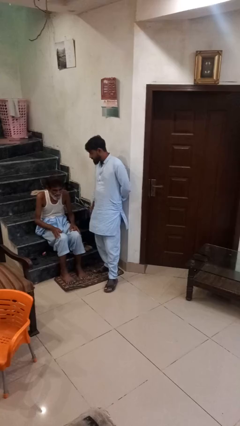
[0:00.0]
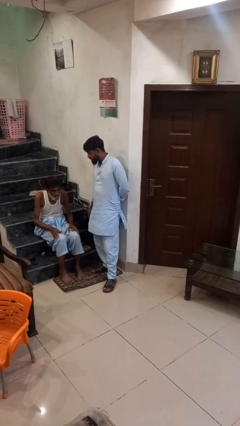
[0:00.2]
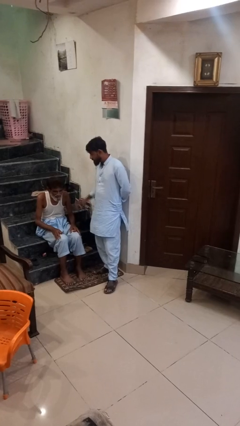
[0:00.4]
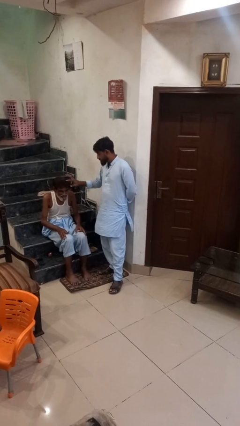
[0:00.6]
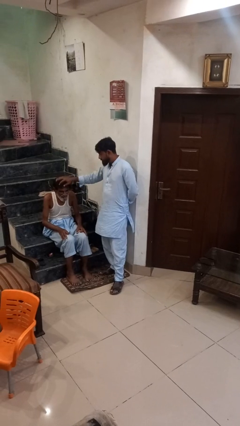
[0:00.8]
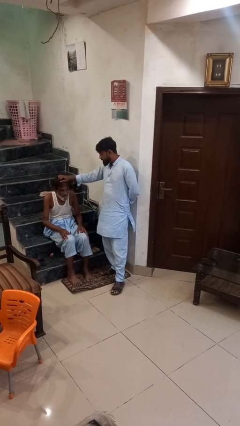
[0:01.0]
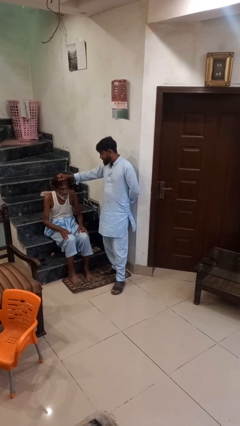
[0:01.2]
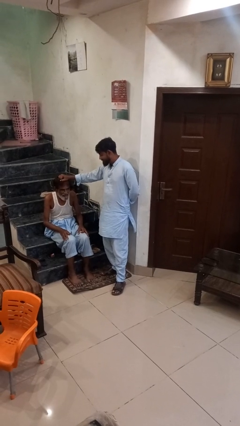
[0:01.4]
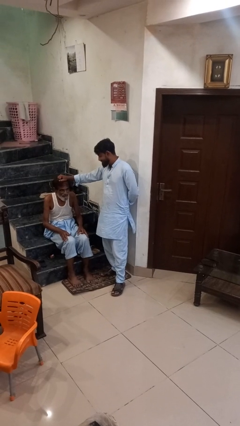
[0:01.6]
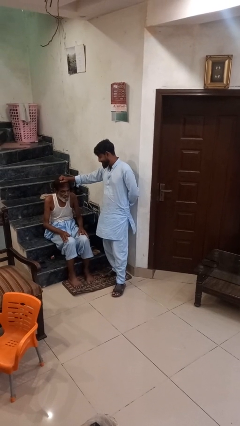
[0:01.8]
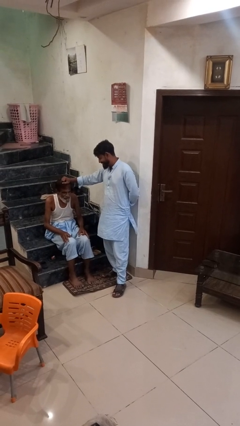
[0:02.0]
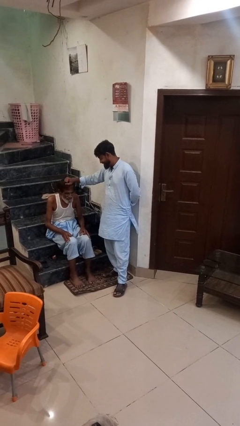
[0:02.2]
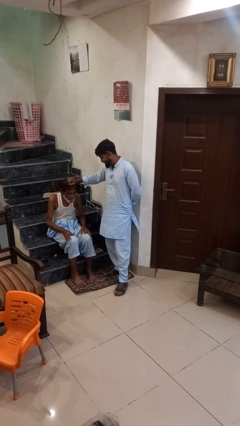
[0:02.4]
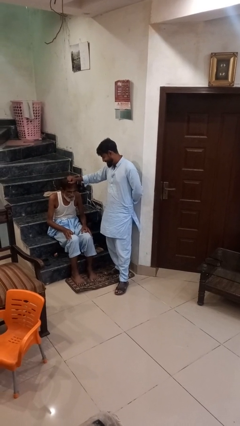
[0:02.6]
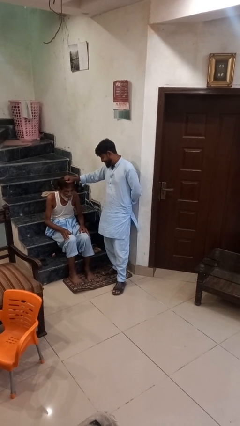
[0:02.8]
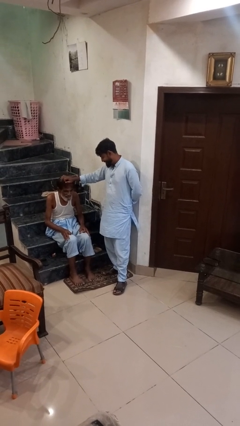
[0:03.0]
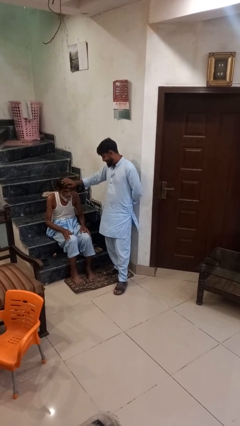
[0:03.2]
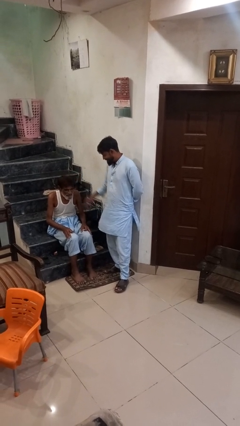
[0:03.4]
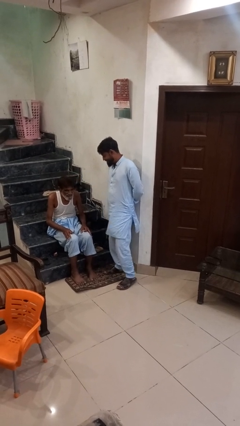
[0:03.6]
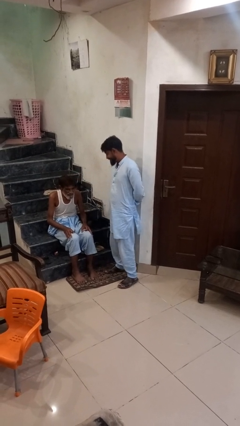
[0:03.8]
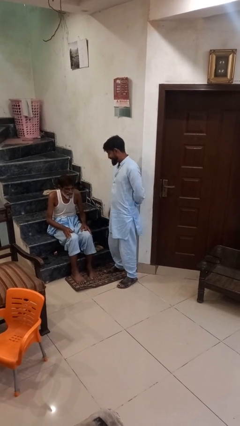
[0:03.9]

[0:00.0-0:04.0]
person grabs person by hair

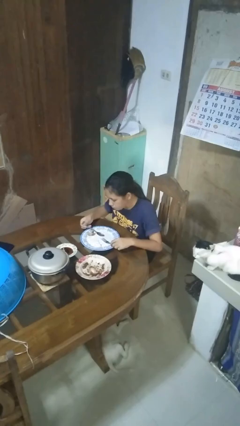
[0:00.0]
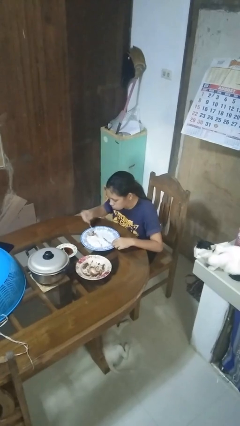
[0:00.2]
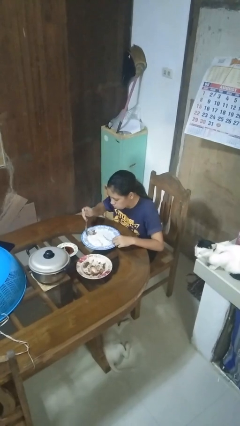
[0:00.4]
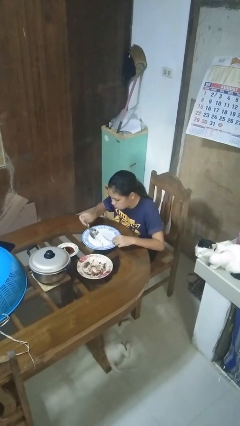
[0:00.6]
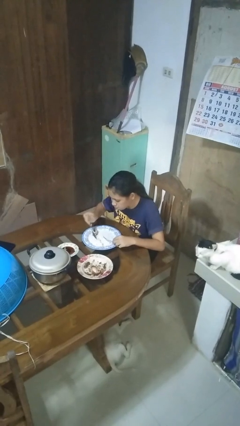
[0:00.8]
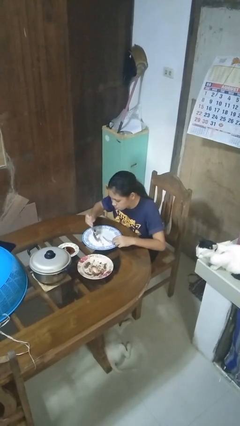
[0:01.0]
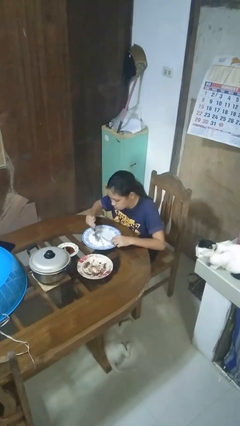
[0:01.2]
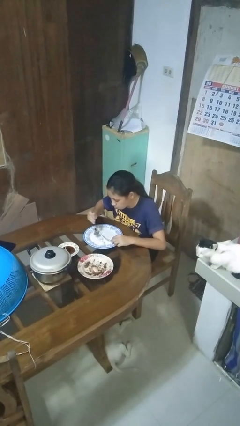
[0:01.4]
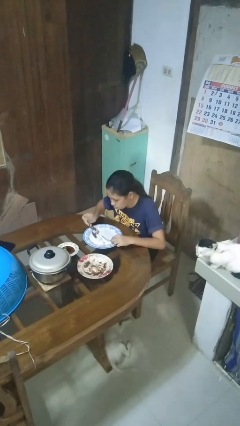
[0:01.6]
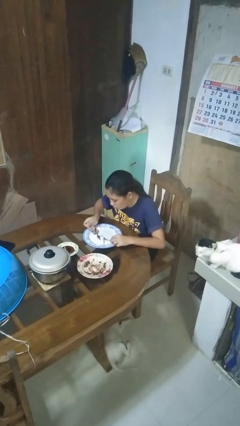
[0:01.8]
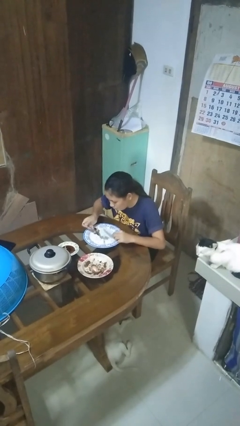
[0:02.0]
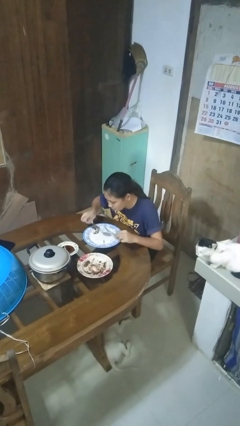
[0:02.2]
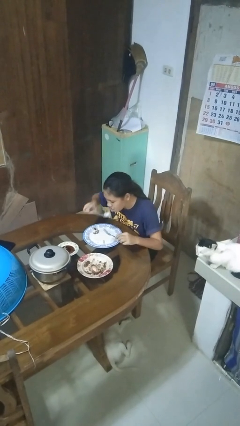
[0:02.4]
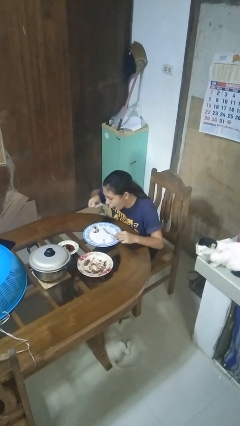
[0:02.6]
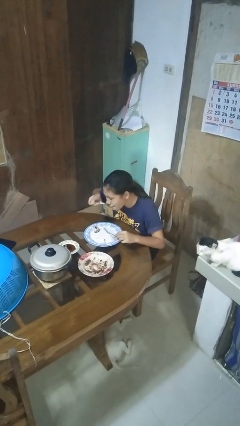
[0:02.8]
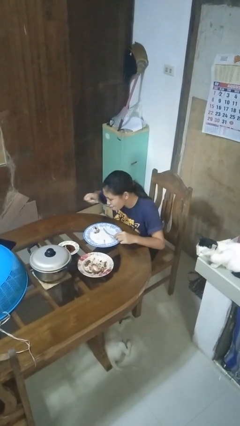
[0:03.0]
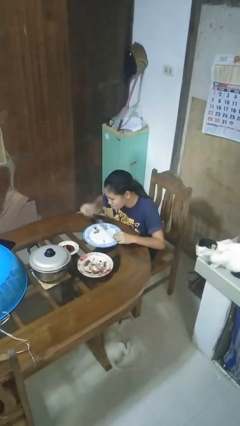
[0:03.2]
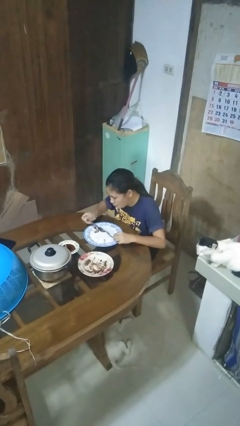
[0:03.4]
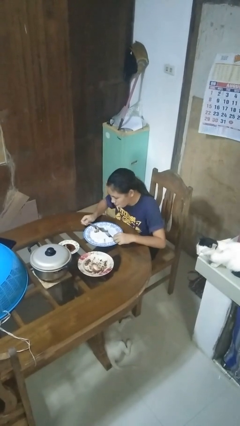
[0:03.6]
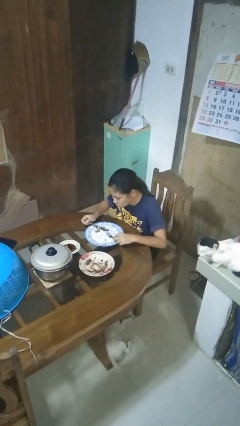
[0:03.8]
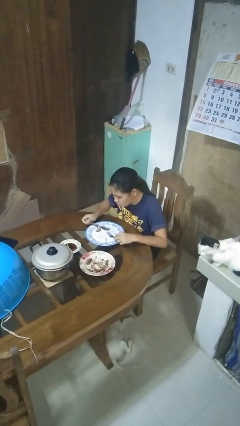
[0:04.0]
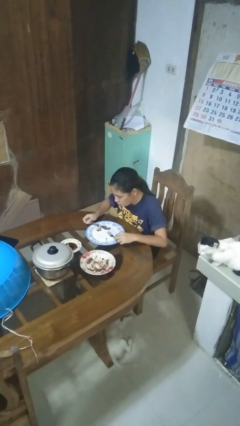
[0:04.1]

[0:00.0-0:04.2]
person eats with utensil

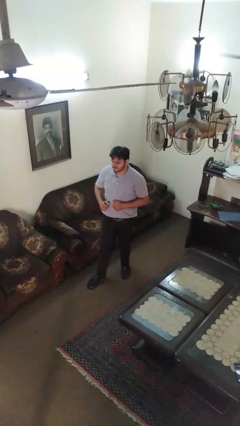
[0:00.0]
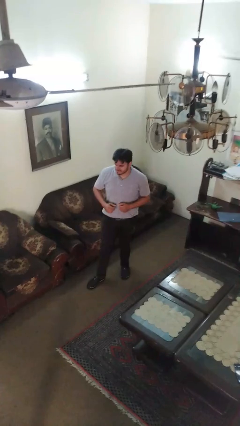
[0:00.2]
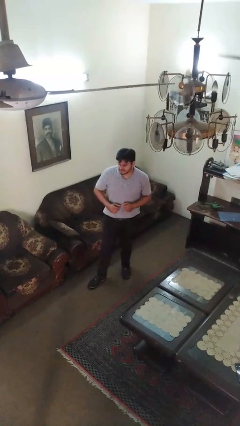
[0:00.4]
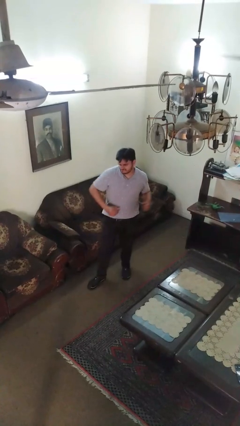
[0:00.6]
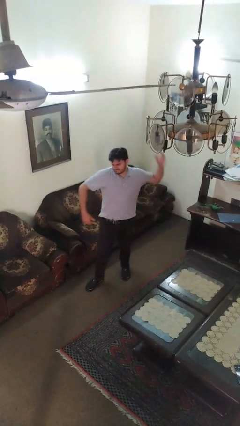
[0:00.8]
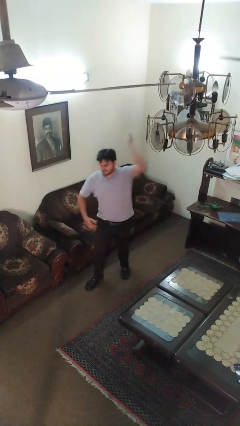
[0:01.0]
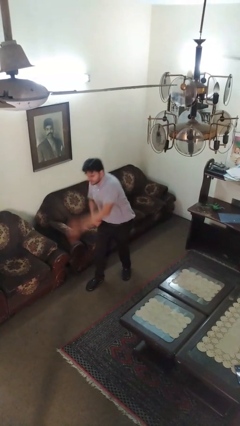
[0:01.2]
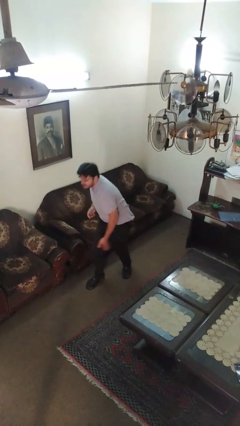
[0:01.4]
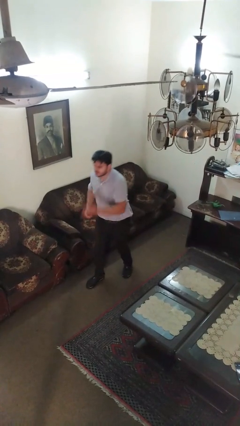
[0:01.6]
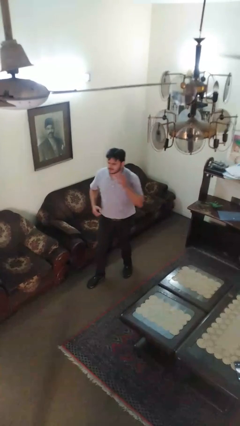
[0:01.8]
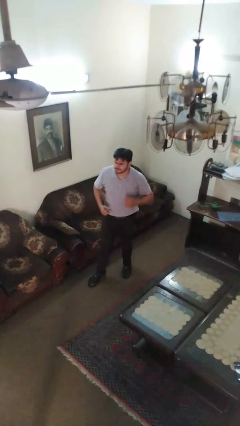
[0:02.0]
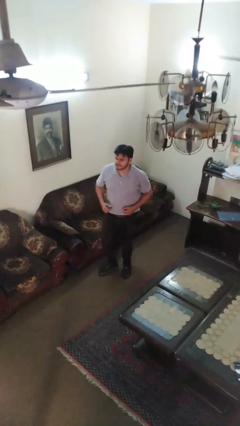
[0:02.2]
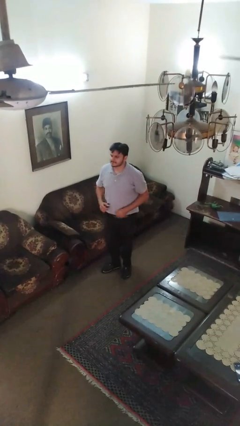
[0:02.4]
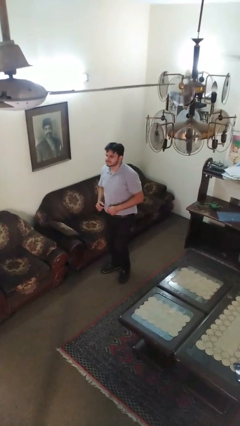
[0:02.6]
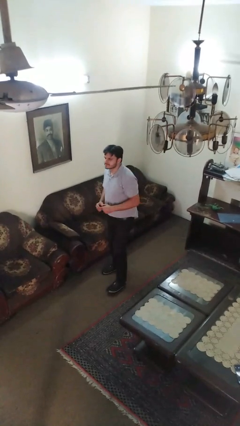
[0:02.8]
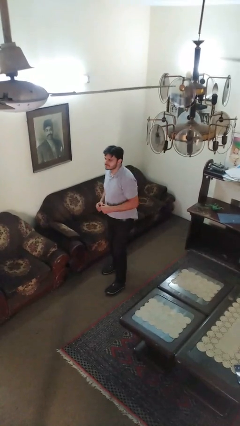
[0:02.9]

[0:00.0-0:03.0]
person karate chop

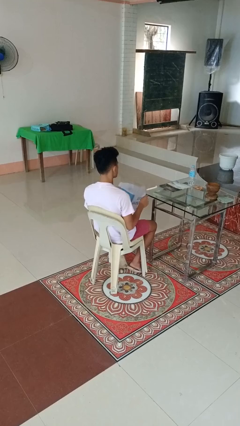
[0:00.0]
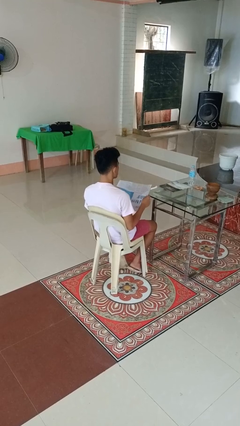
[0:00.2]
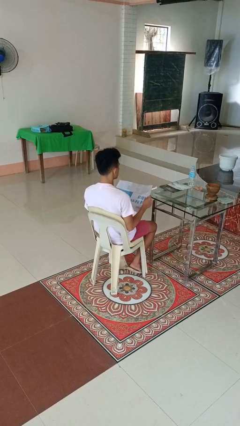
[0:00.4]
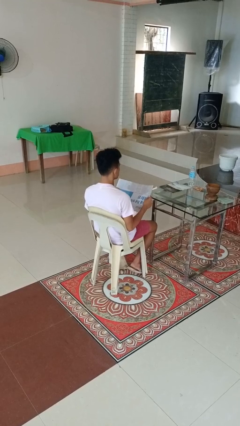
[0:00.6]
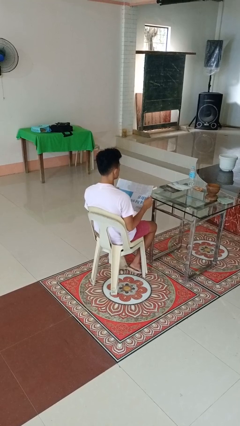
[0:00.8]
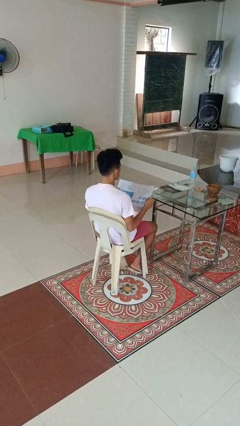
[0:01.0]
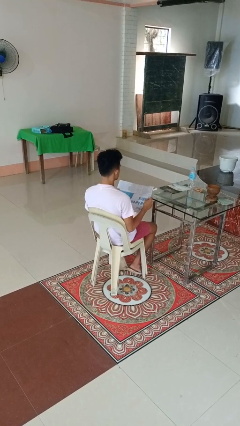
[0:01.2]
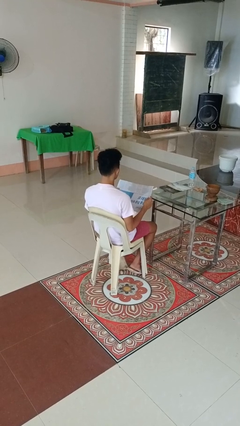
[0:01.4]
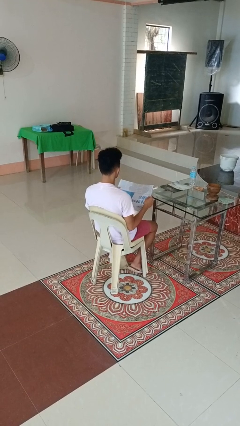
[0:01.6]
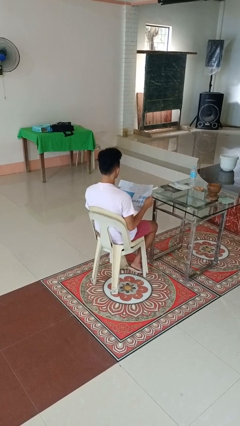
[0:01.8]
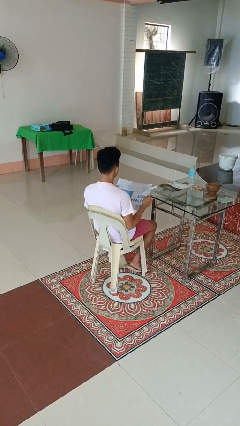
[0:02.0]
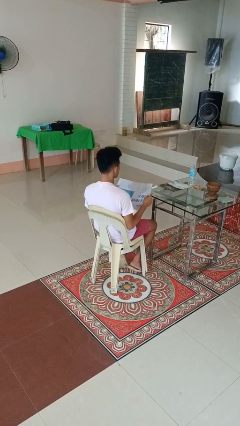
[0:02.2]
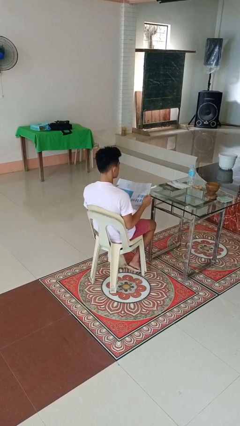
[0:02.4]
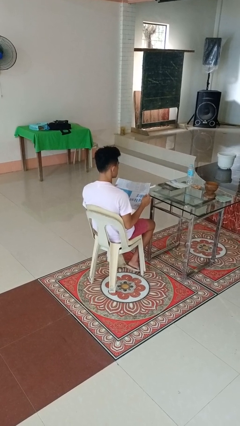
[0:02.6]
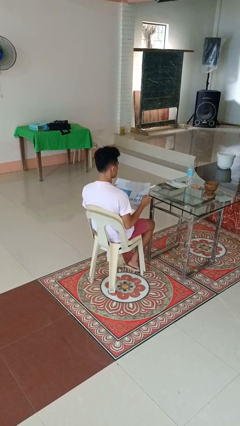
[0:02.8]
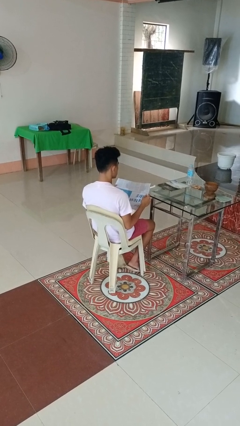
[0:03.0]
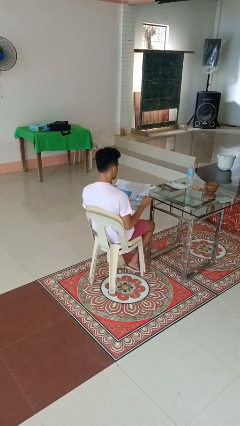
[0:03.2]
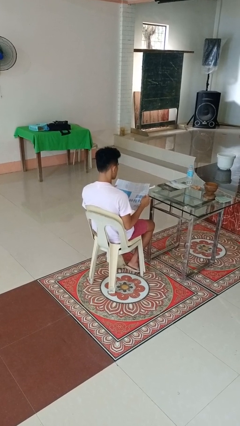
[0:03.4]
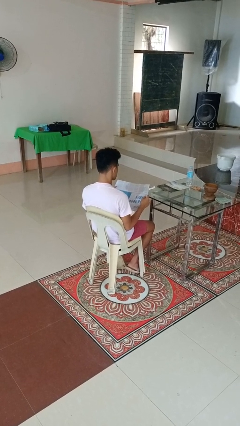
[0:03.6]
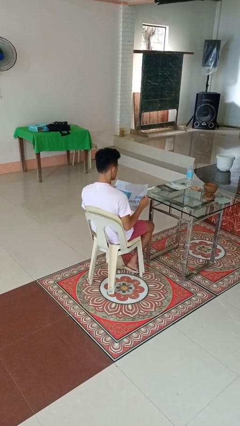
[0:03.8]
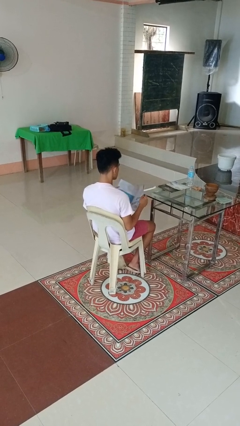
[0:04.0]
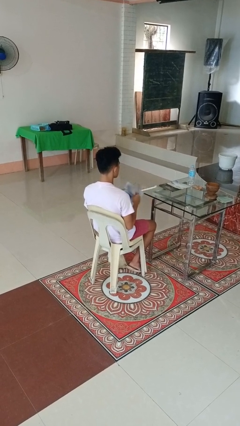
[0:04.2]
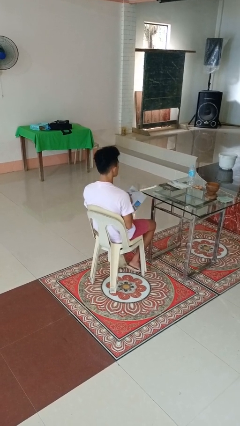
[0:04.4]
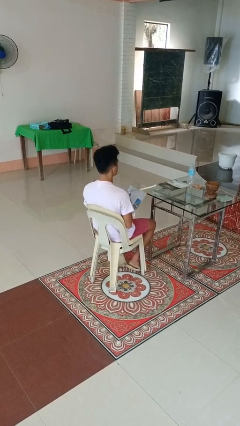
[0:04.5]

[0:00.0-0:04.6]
person reads newspaper

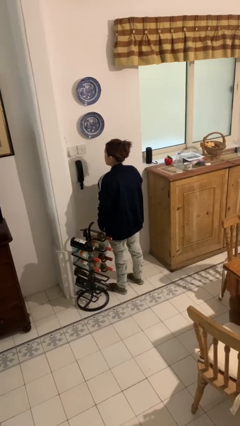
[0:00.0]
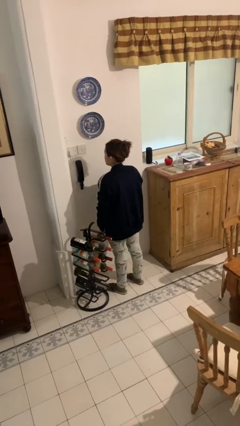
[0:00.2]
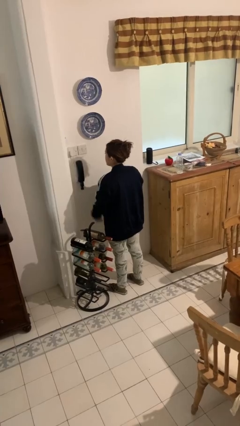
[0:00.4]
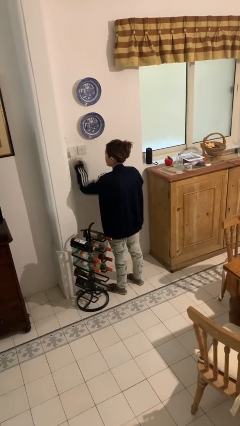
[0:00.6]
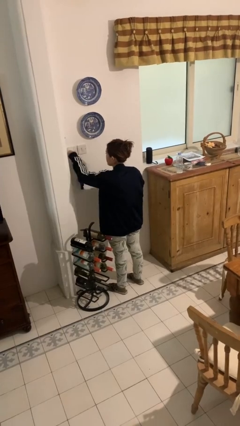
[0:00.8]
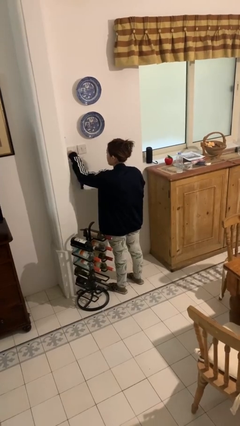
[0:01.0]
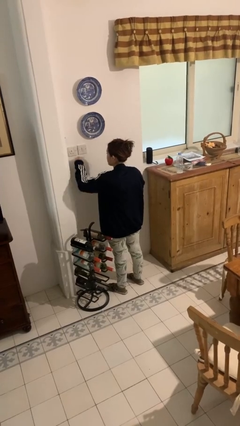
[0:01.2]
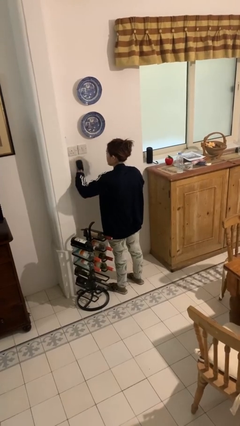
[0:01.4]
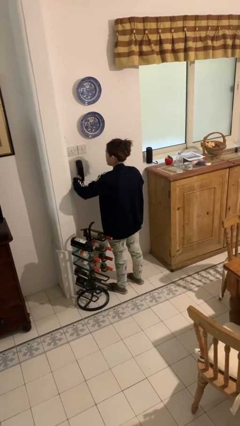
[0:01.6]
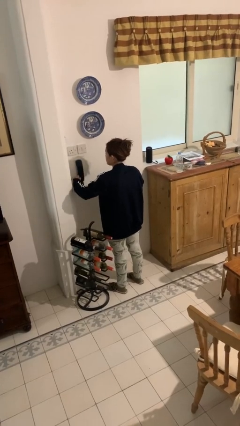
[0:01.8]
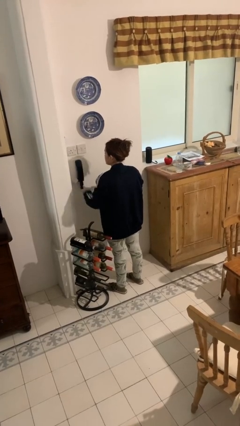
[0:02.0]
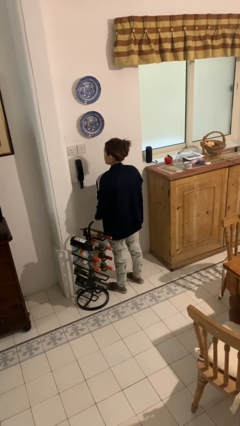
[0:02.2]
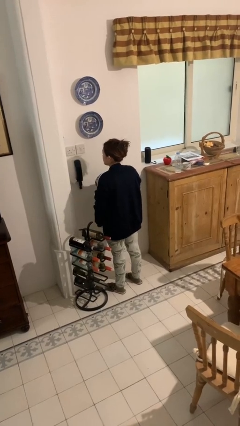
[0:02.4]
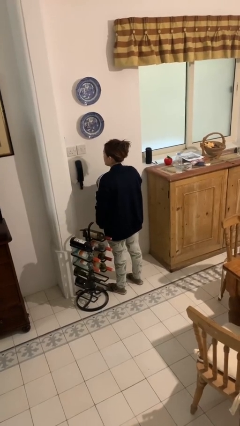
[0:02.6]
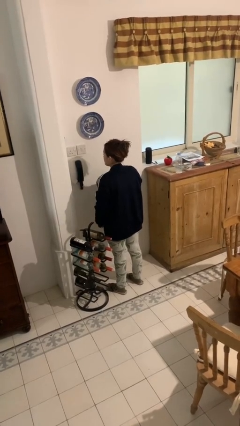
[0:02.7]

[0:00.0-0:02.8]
person unplugs from electrical socket
